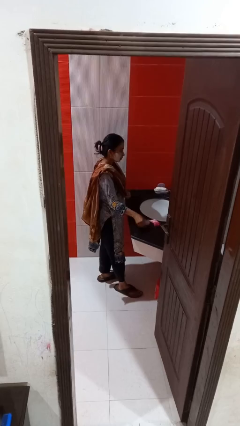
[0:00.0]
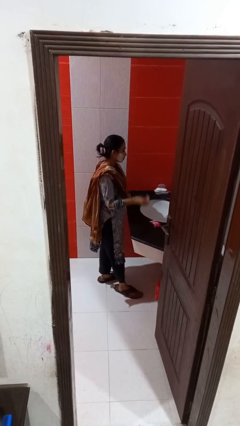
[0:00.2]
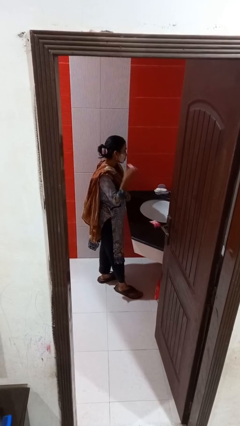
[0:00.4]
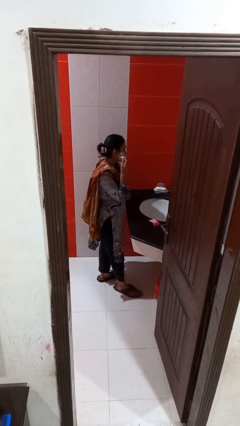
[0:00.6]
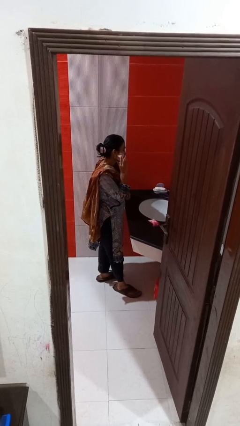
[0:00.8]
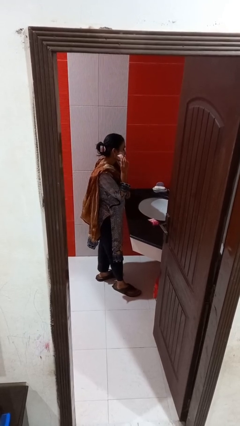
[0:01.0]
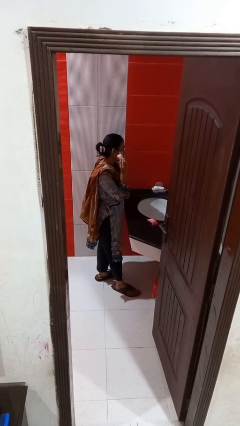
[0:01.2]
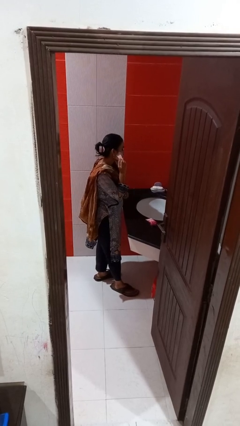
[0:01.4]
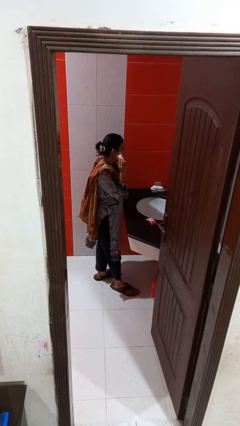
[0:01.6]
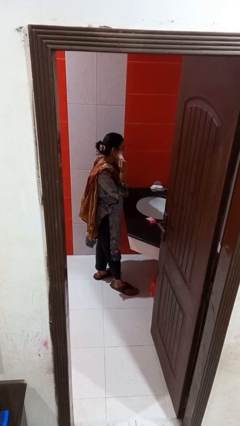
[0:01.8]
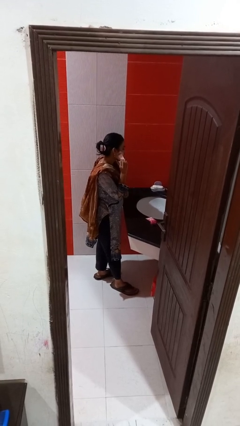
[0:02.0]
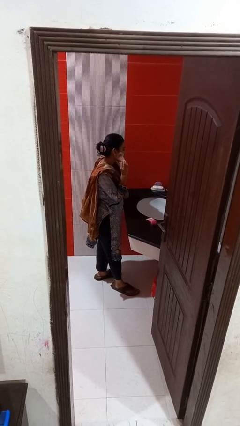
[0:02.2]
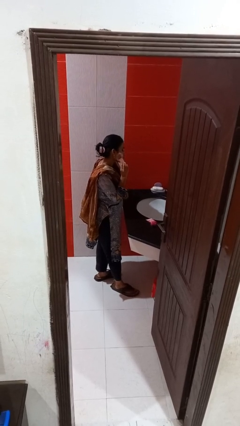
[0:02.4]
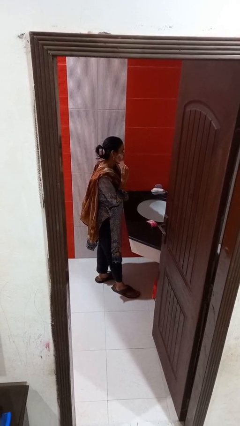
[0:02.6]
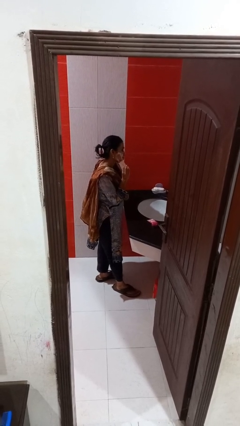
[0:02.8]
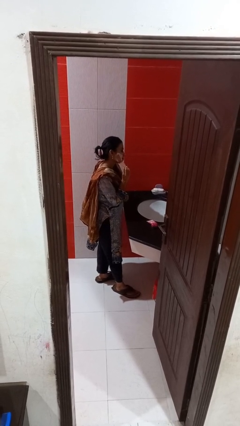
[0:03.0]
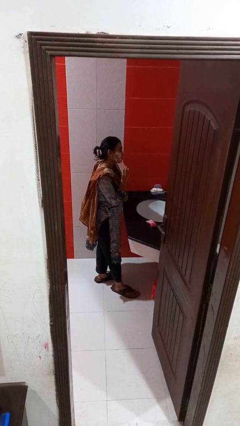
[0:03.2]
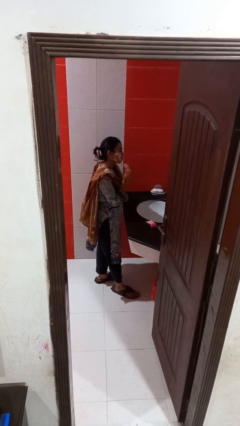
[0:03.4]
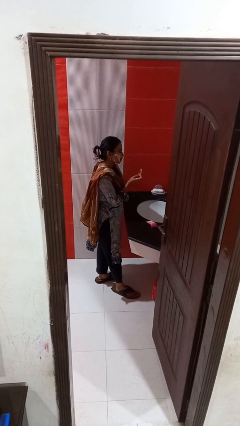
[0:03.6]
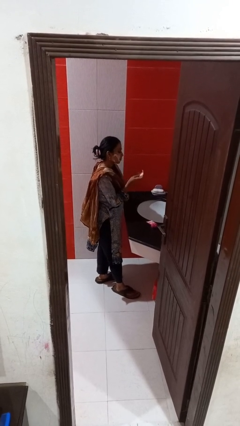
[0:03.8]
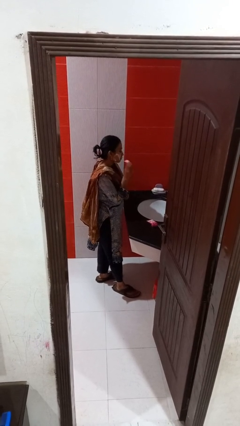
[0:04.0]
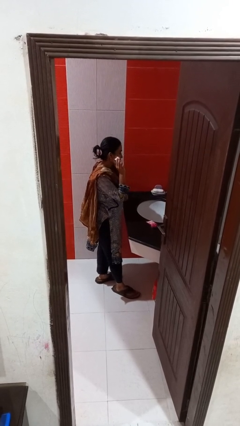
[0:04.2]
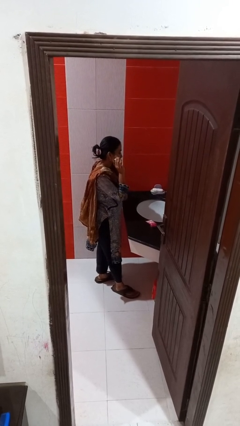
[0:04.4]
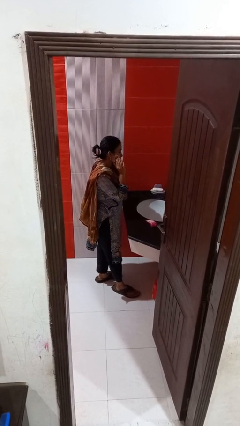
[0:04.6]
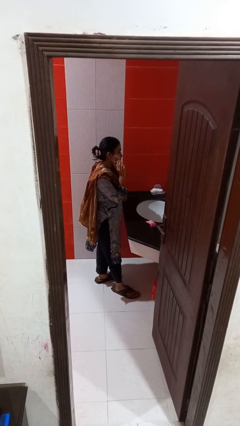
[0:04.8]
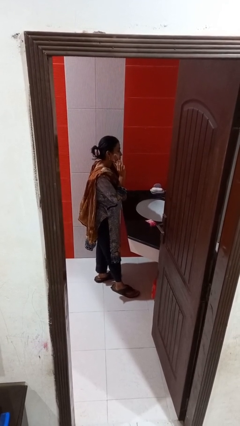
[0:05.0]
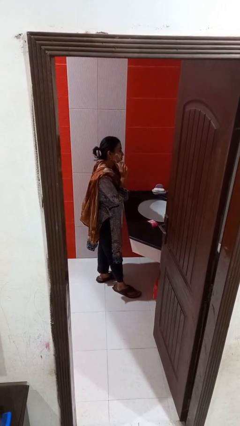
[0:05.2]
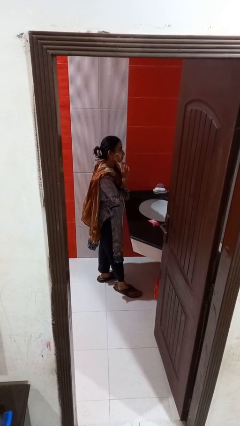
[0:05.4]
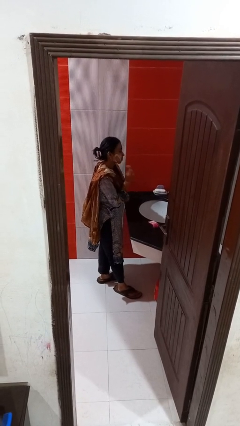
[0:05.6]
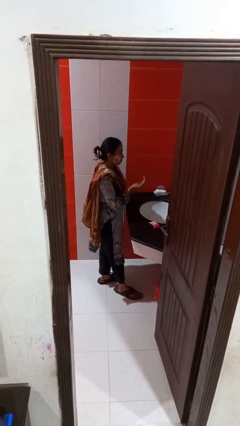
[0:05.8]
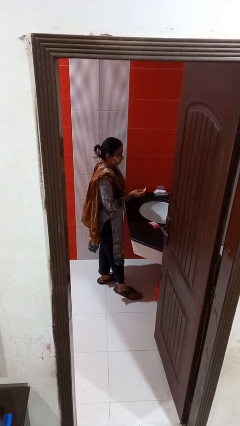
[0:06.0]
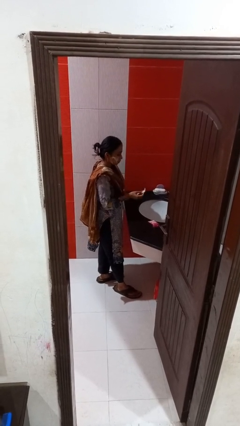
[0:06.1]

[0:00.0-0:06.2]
person shaves face

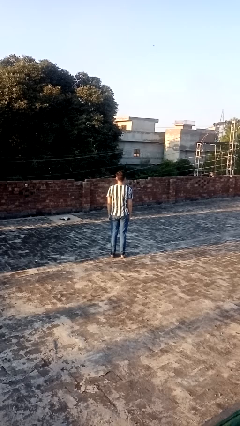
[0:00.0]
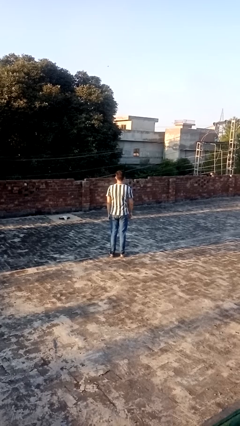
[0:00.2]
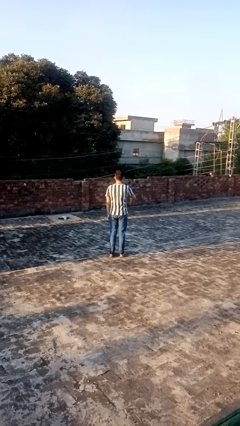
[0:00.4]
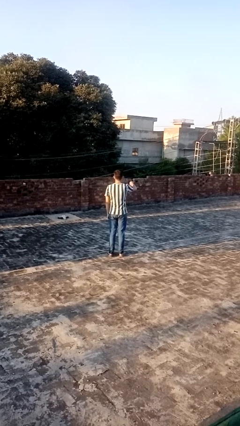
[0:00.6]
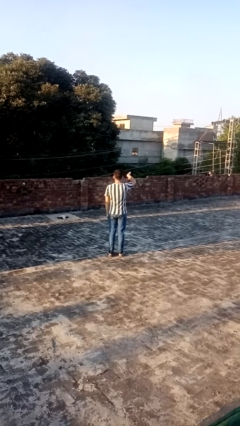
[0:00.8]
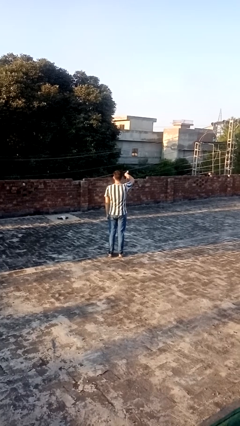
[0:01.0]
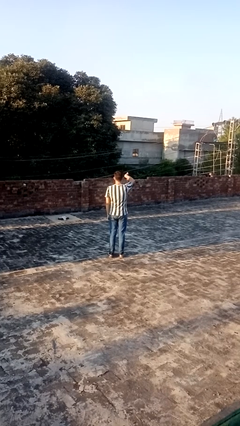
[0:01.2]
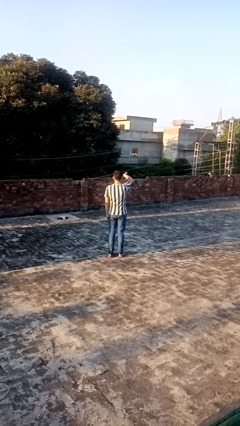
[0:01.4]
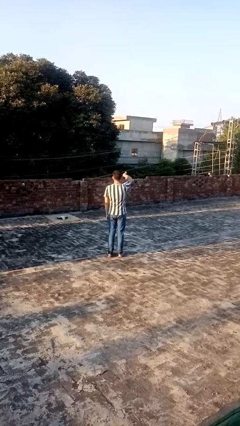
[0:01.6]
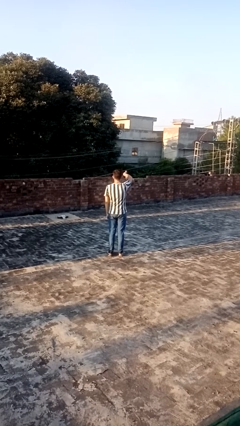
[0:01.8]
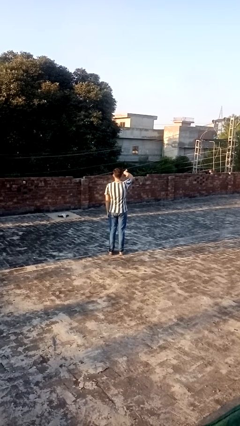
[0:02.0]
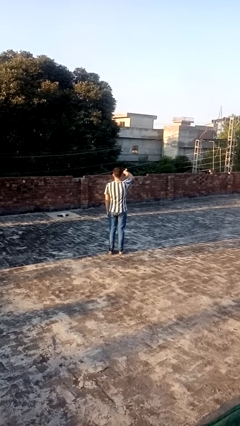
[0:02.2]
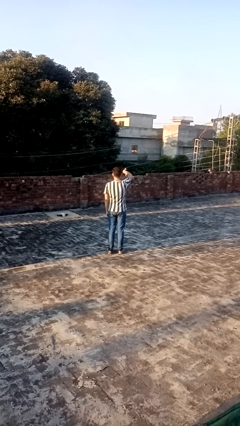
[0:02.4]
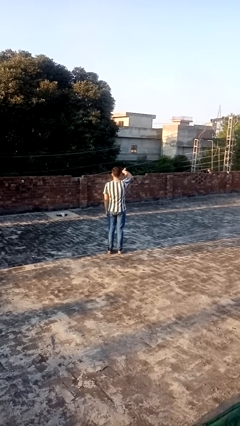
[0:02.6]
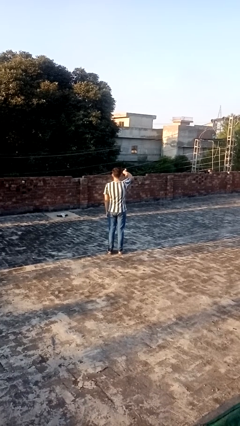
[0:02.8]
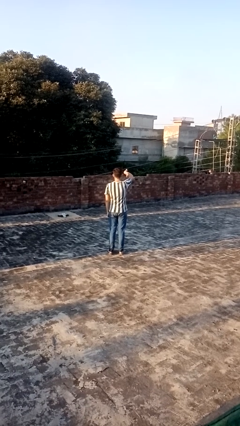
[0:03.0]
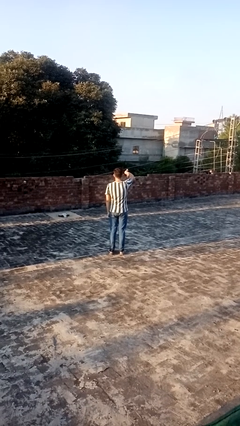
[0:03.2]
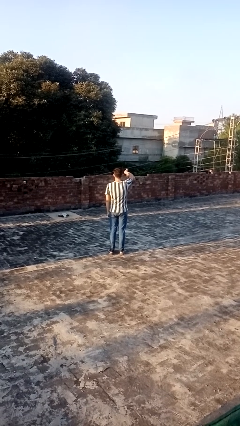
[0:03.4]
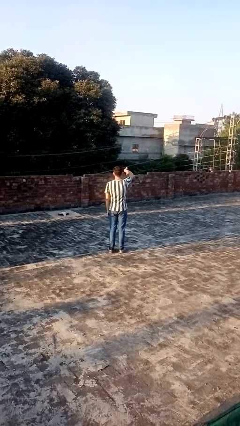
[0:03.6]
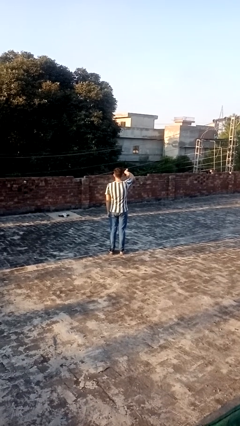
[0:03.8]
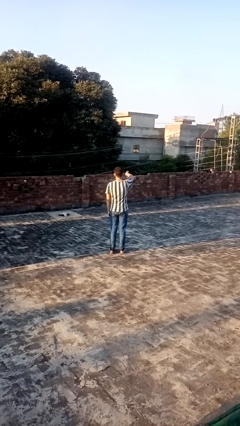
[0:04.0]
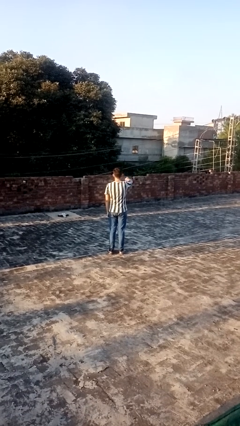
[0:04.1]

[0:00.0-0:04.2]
person gestures thumbs down

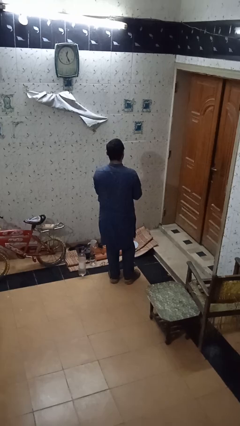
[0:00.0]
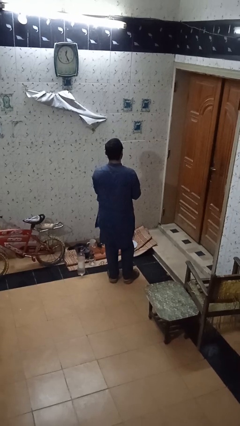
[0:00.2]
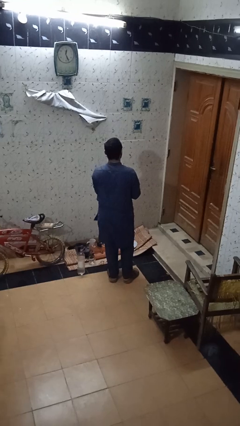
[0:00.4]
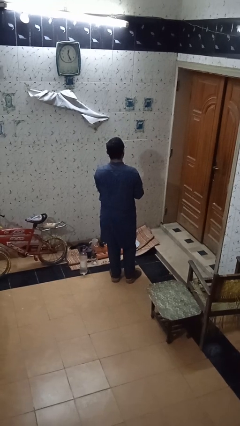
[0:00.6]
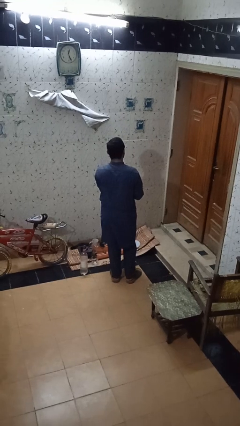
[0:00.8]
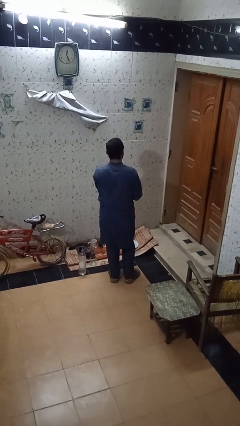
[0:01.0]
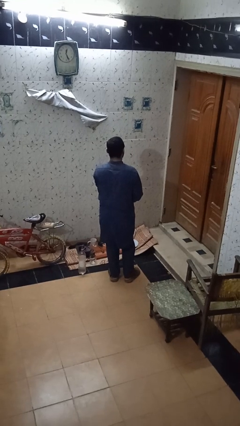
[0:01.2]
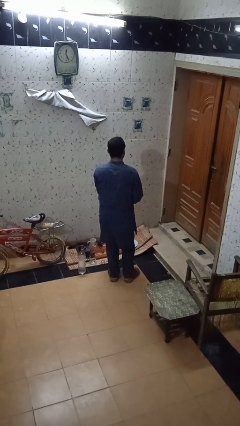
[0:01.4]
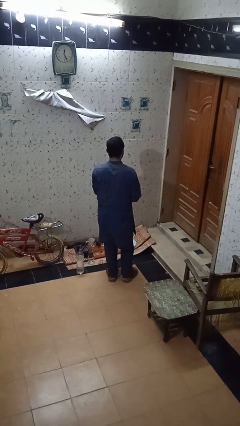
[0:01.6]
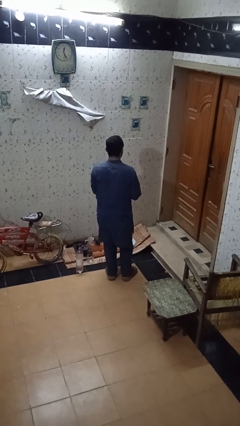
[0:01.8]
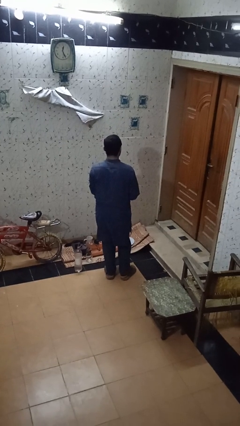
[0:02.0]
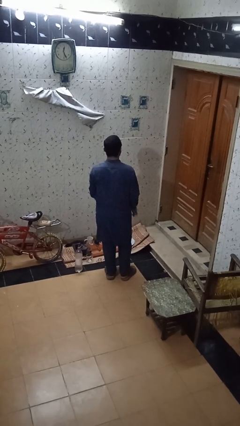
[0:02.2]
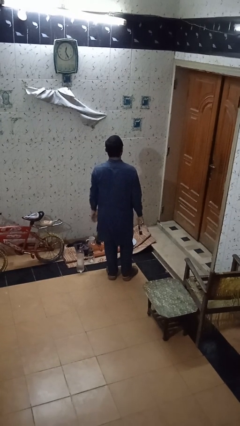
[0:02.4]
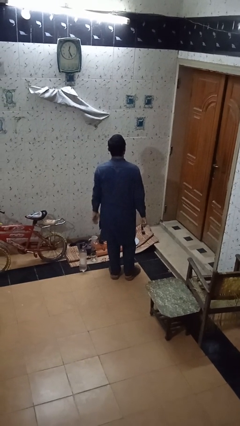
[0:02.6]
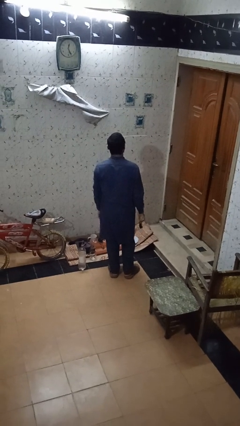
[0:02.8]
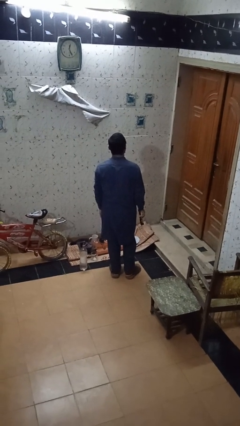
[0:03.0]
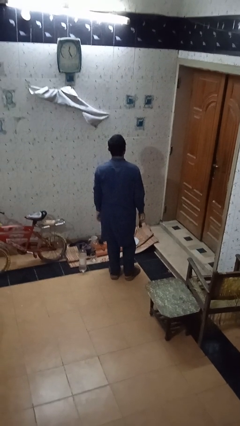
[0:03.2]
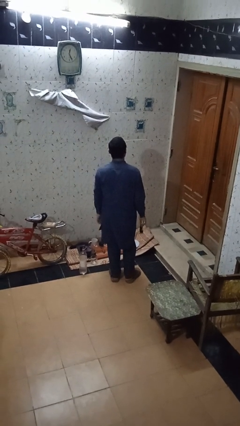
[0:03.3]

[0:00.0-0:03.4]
person takes off wristwatch

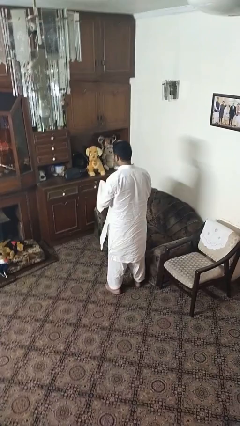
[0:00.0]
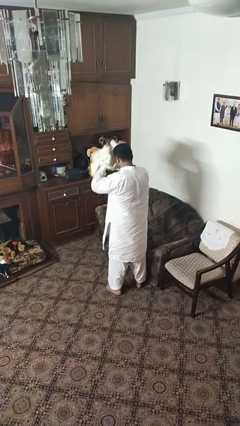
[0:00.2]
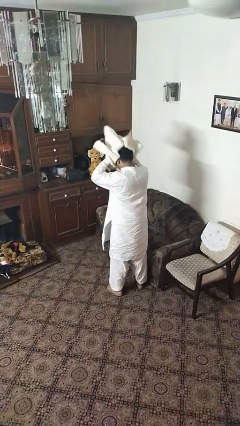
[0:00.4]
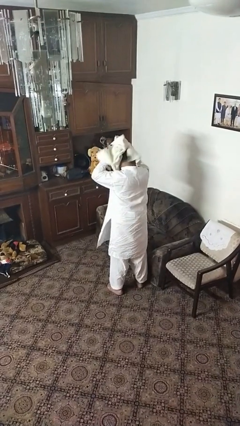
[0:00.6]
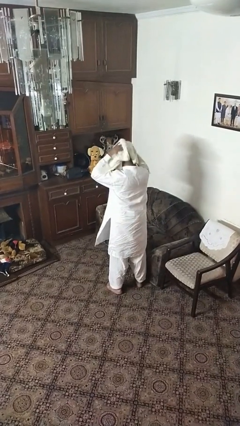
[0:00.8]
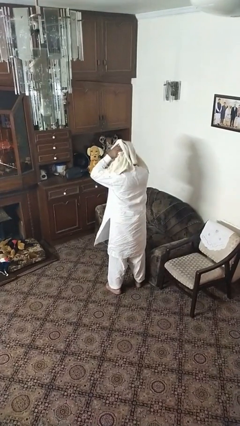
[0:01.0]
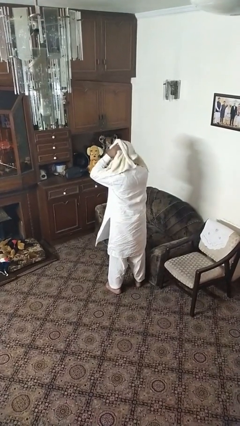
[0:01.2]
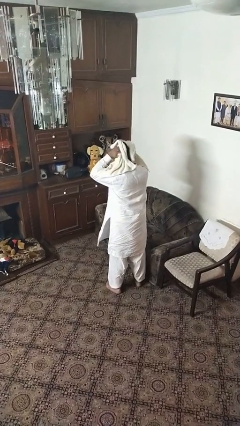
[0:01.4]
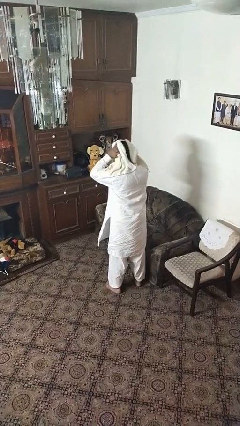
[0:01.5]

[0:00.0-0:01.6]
person dries hair with towel

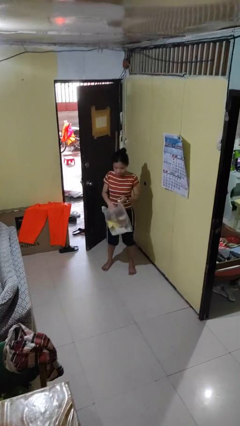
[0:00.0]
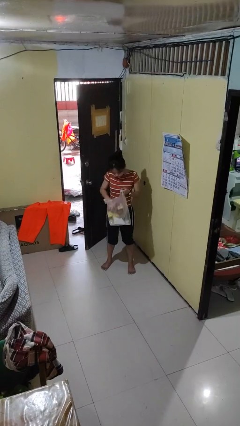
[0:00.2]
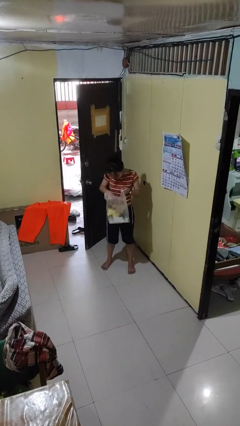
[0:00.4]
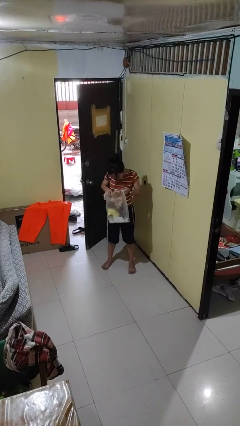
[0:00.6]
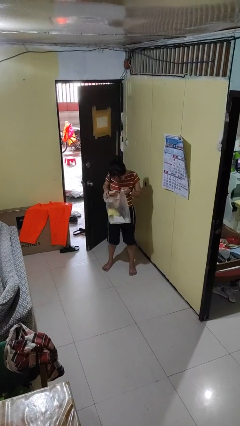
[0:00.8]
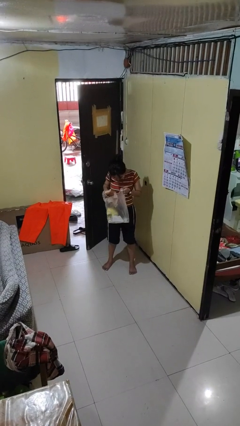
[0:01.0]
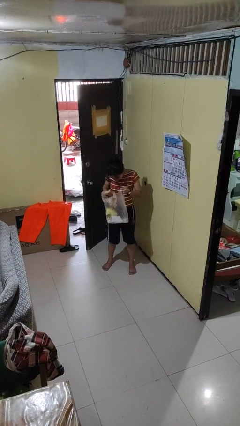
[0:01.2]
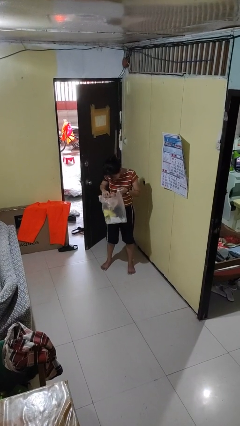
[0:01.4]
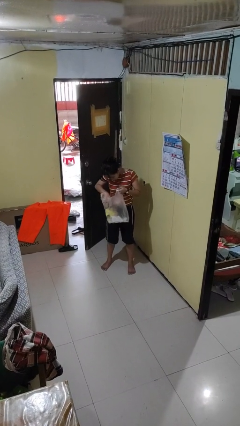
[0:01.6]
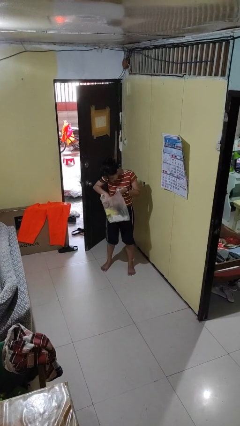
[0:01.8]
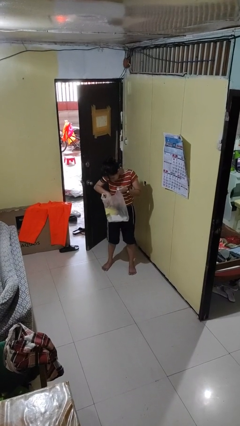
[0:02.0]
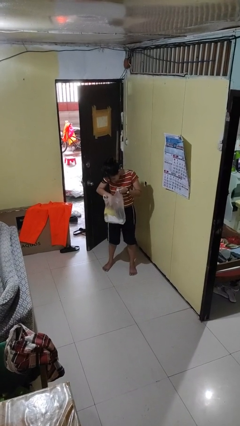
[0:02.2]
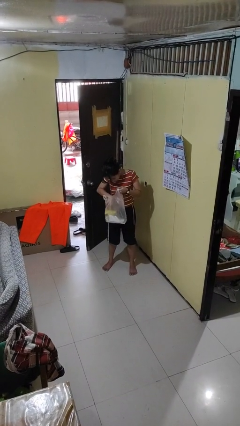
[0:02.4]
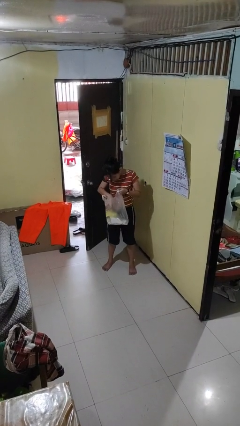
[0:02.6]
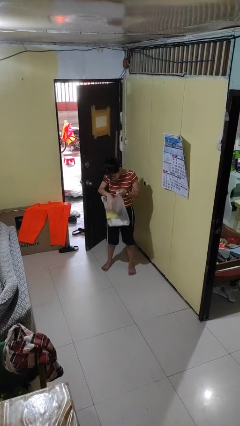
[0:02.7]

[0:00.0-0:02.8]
person searches in bag
